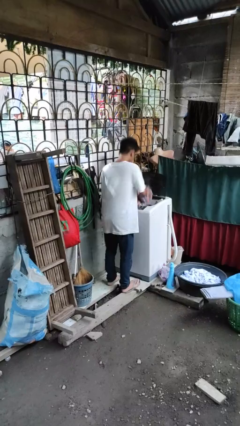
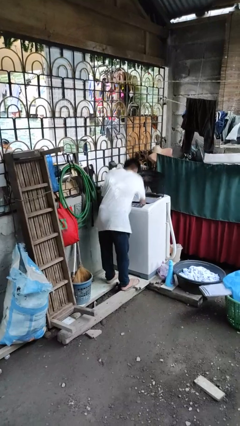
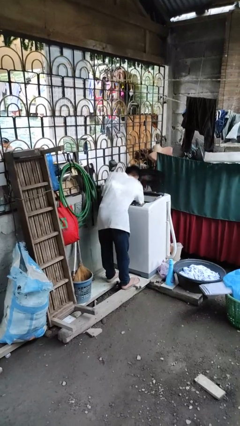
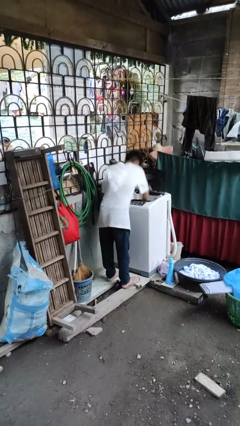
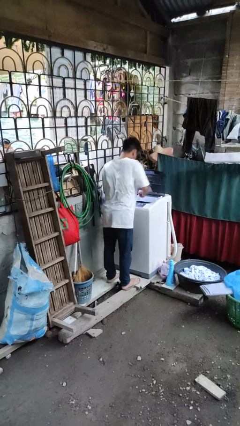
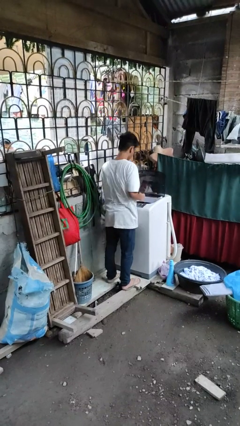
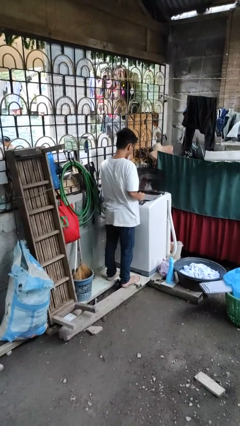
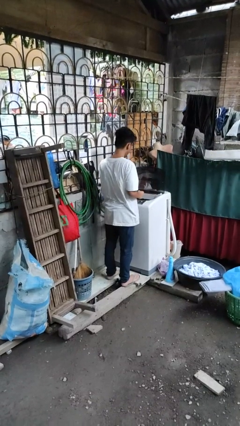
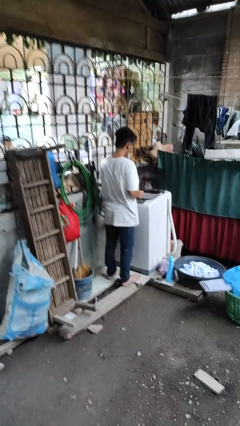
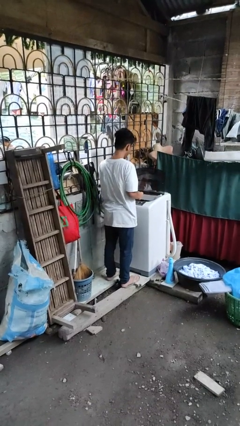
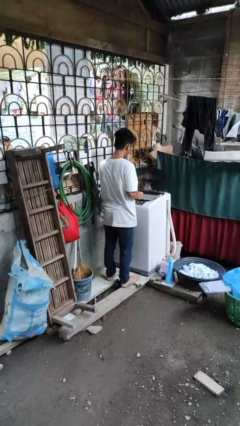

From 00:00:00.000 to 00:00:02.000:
person loads dryer

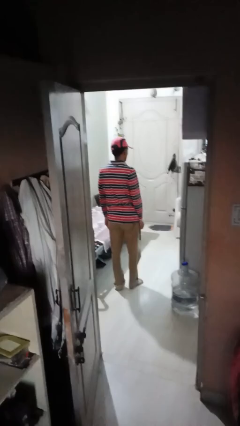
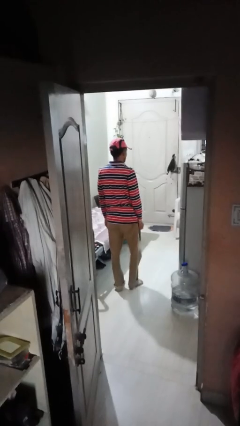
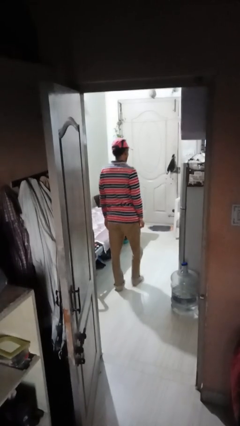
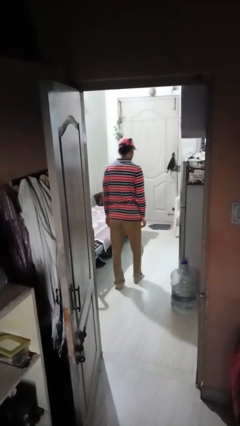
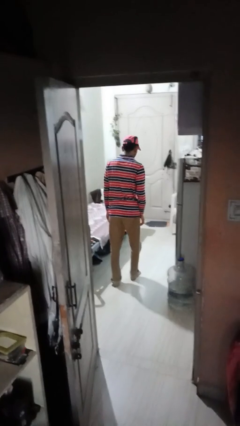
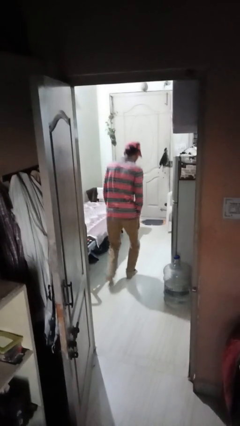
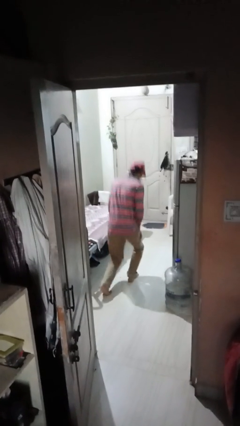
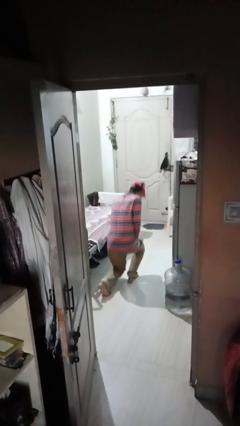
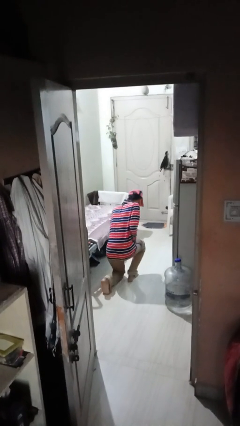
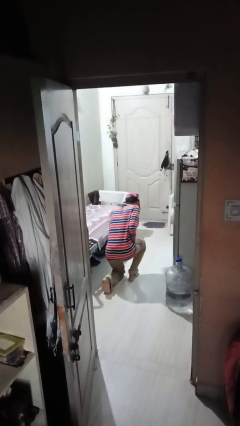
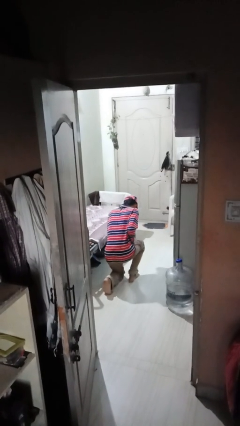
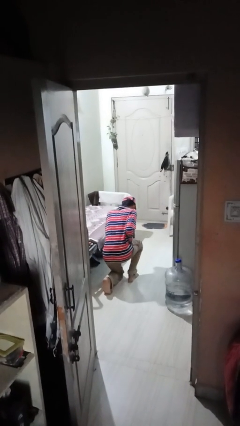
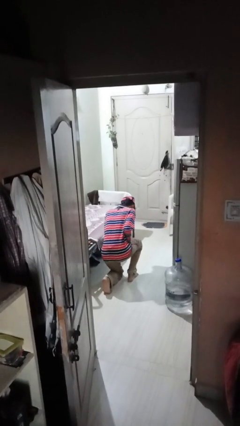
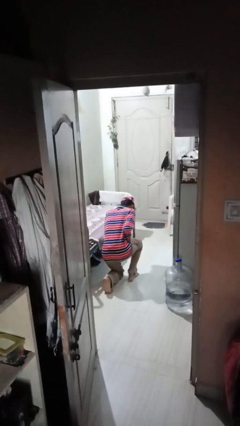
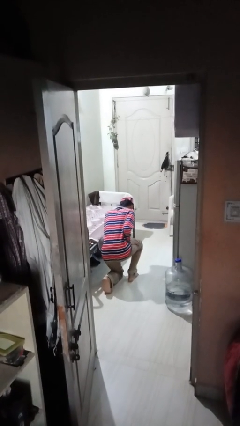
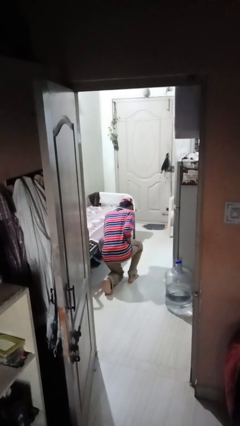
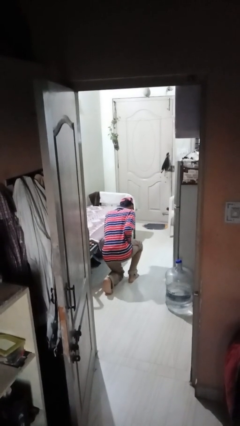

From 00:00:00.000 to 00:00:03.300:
person kneels

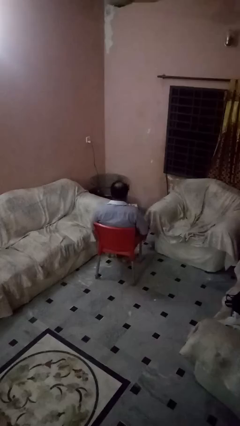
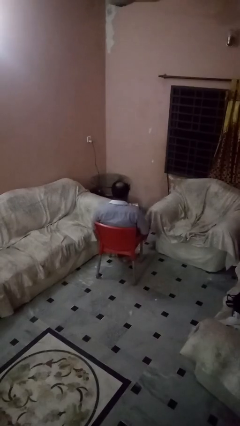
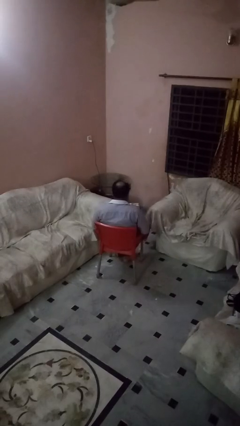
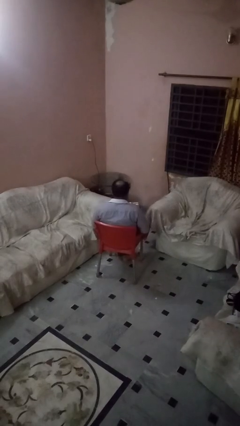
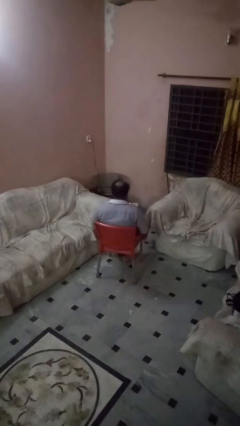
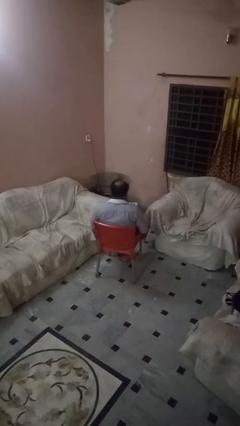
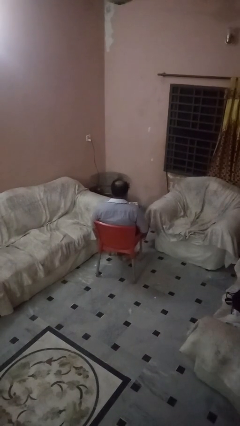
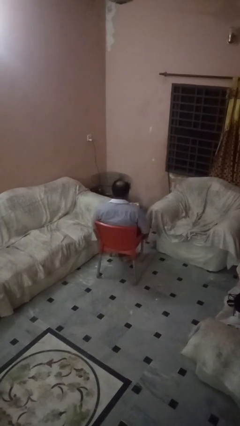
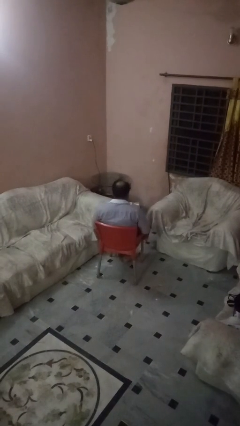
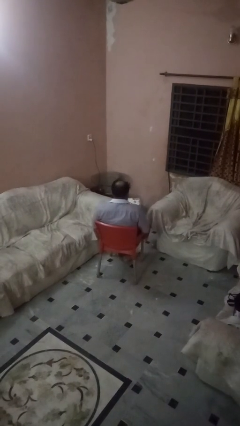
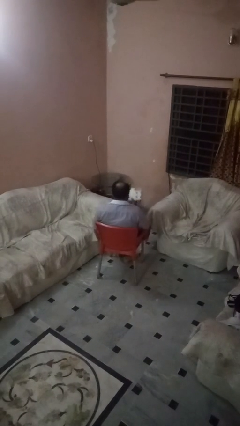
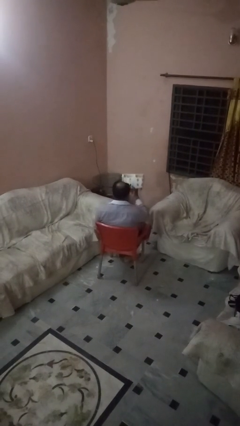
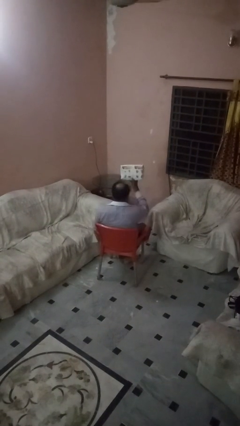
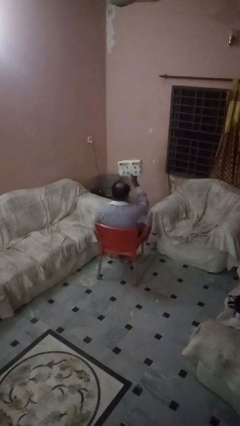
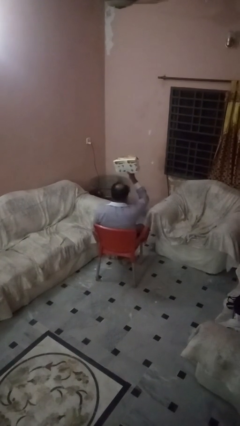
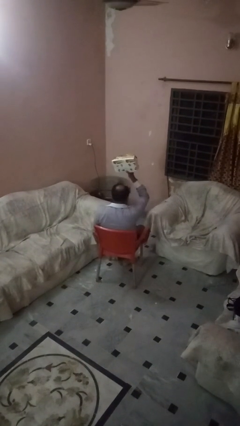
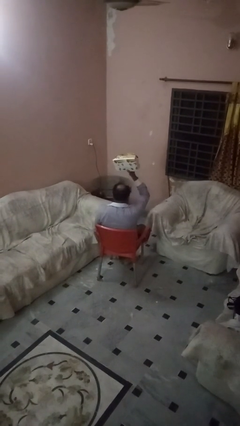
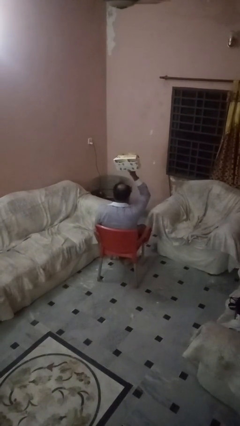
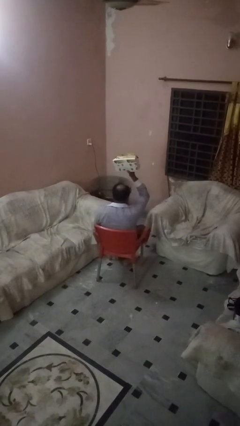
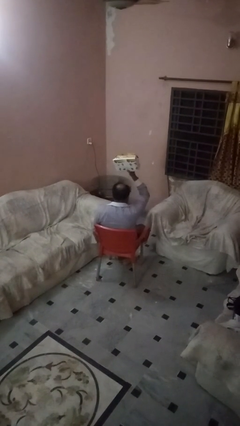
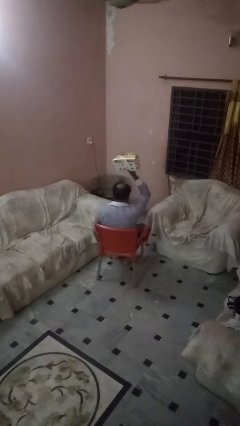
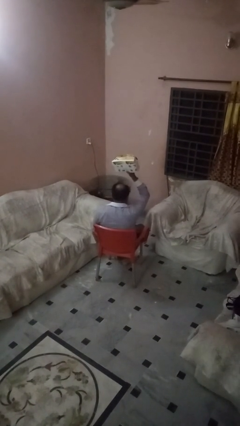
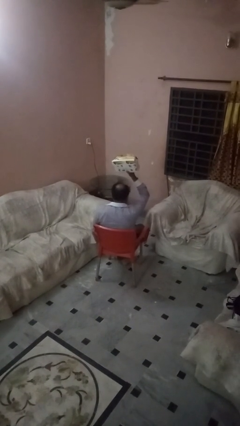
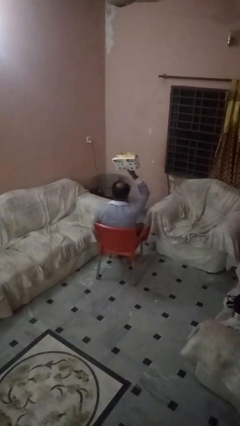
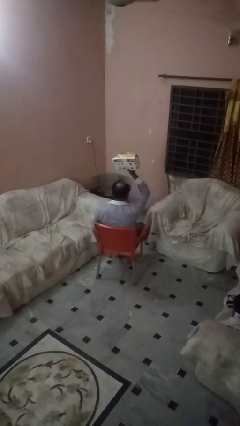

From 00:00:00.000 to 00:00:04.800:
person holds object above head

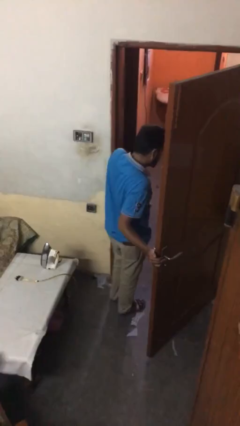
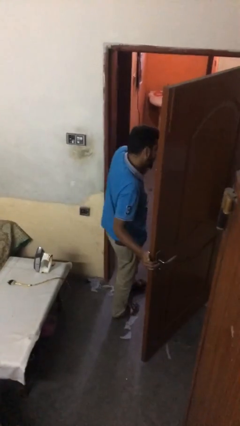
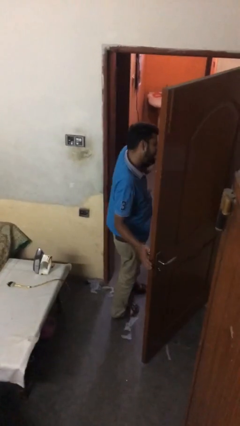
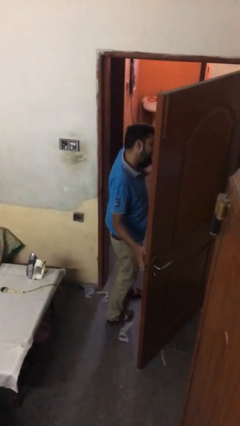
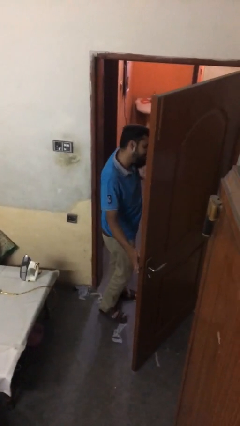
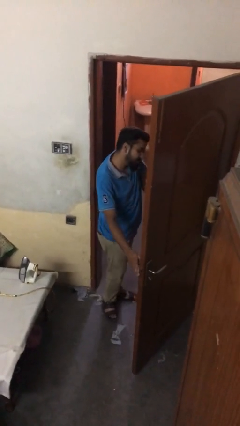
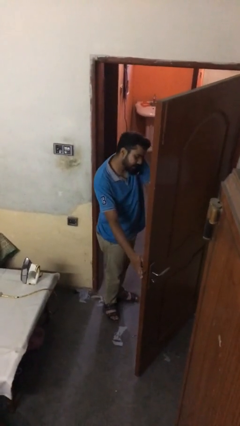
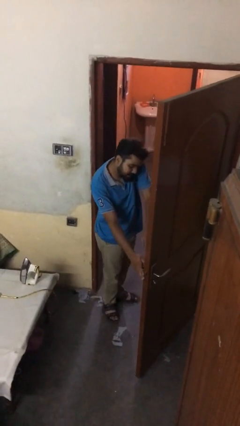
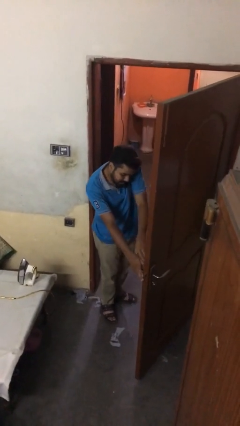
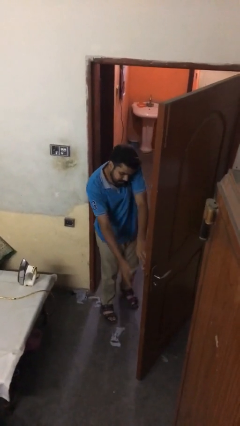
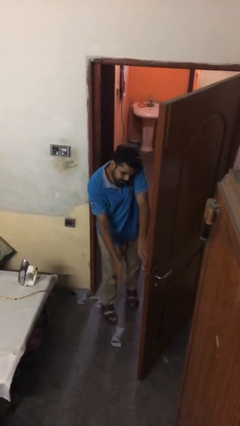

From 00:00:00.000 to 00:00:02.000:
person exits scene through structure

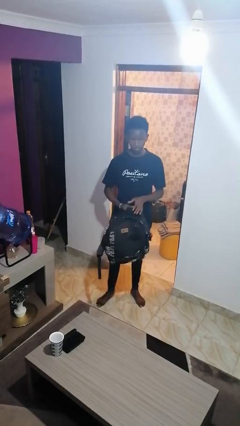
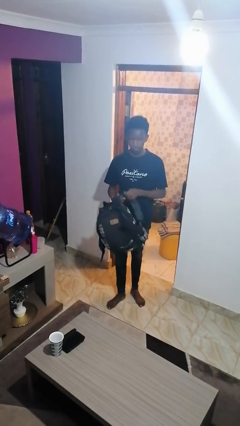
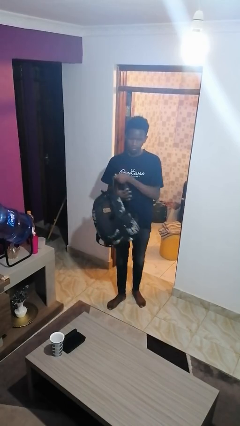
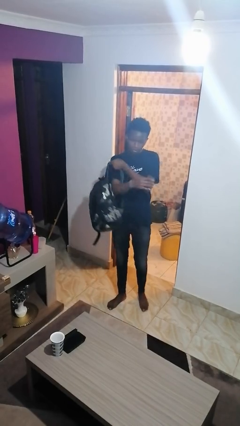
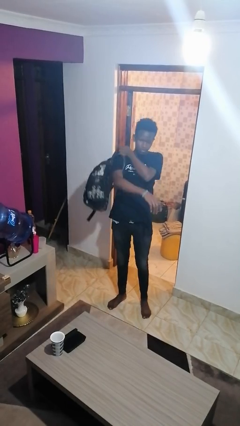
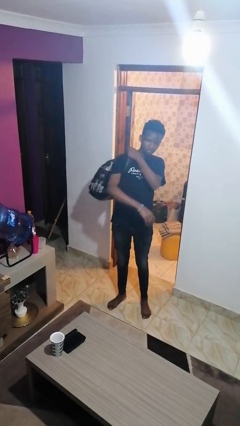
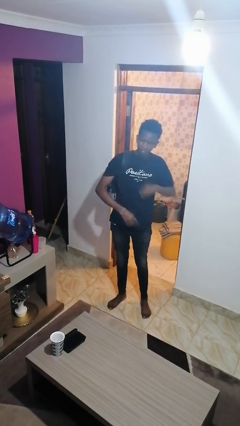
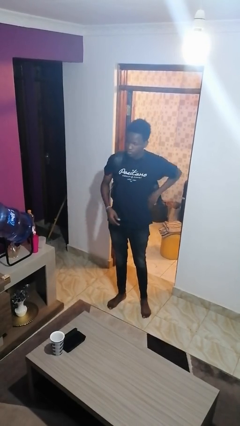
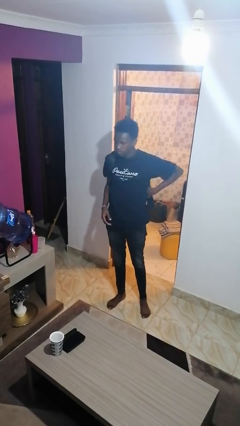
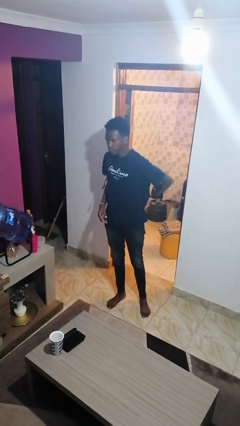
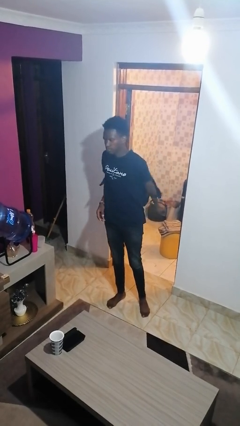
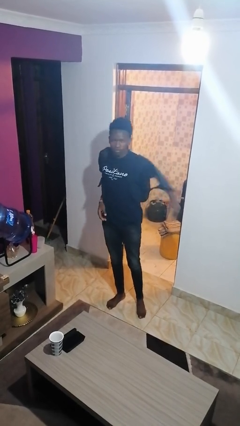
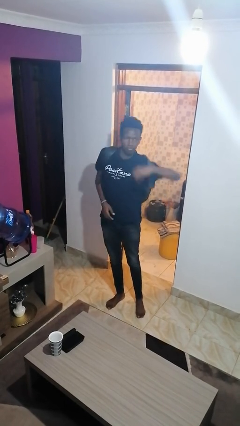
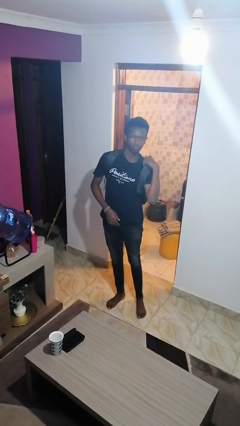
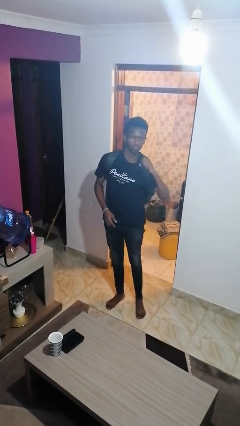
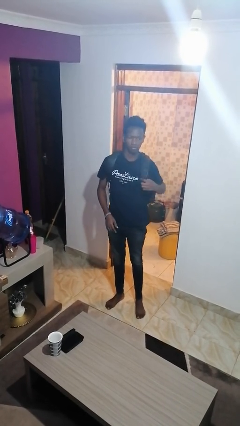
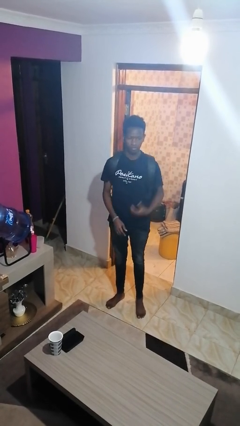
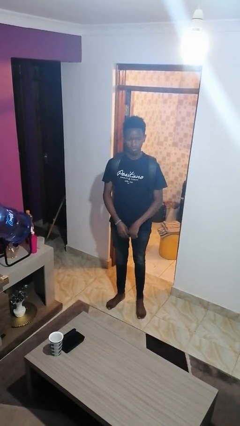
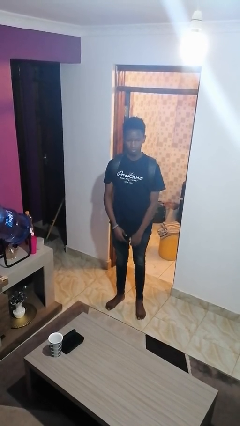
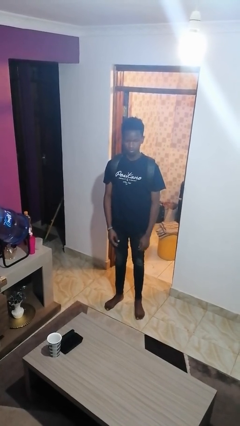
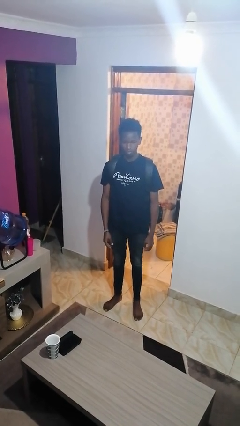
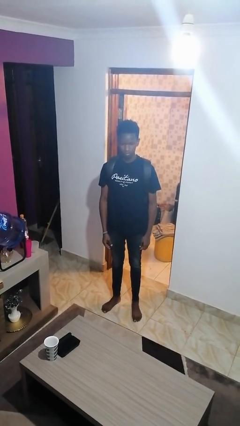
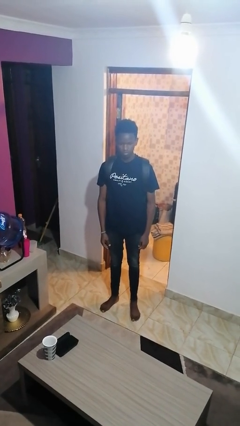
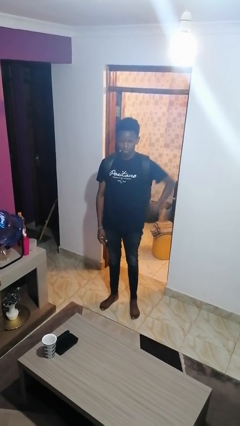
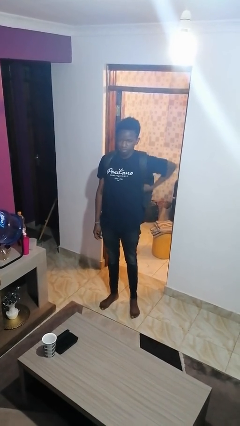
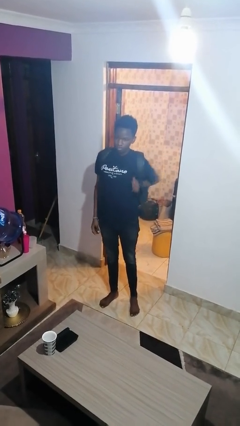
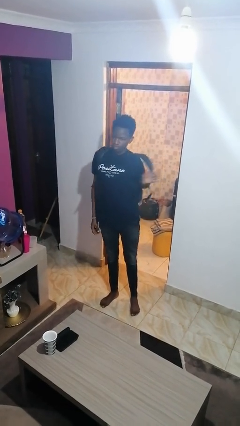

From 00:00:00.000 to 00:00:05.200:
person puts on backpack

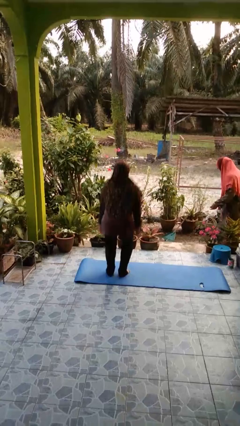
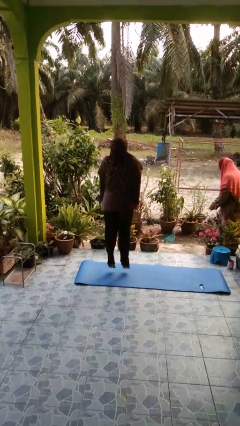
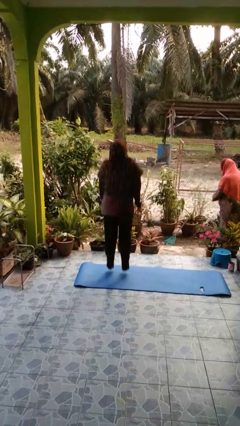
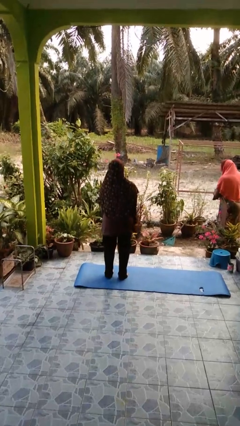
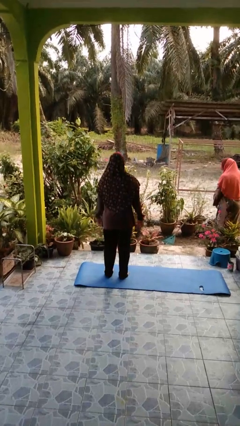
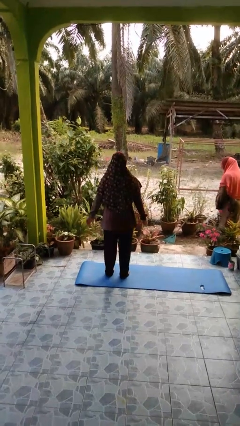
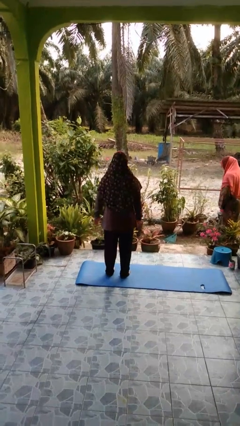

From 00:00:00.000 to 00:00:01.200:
person jumps
